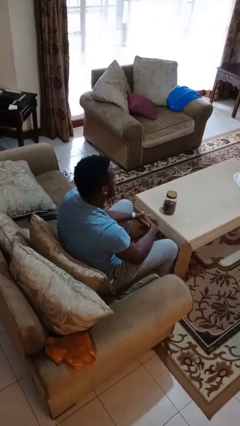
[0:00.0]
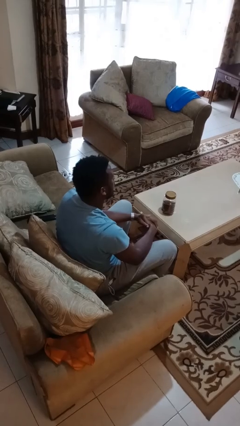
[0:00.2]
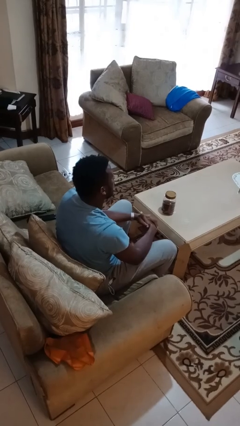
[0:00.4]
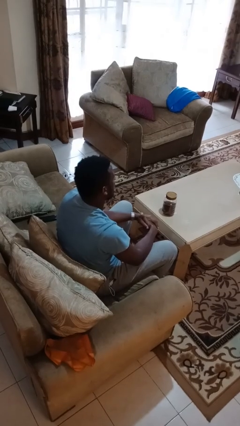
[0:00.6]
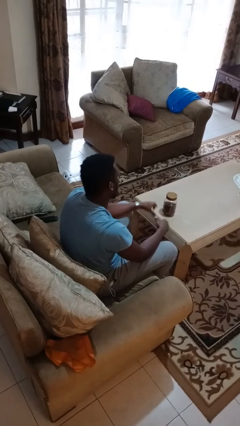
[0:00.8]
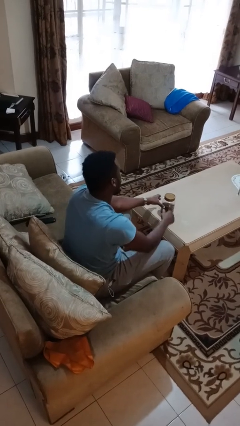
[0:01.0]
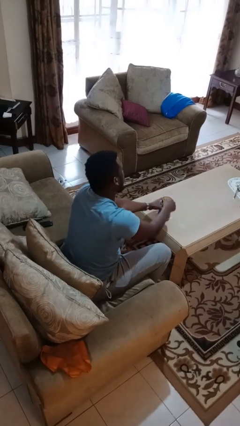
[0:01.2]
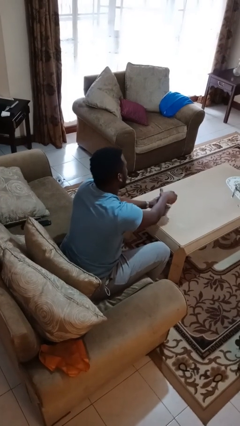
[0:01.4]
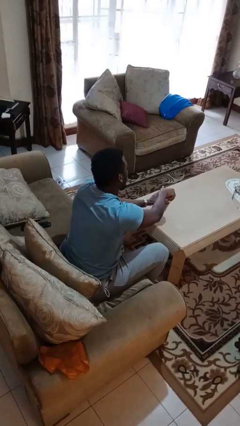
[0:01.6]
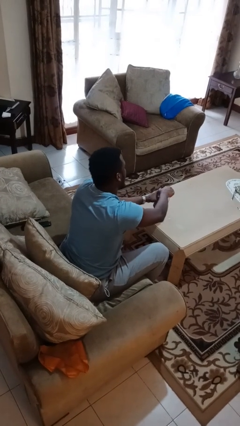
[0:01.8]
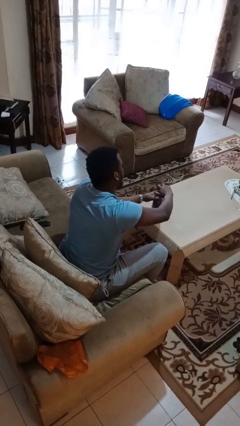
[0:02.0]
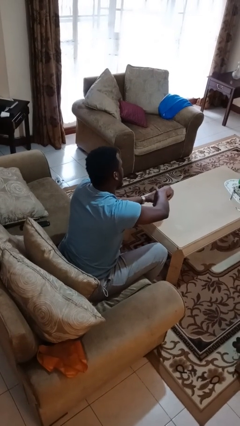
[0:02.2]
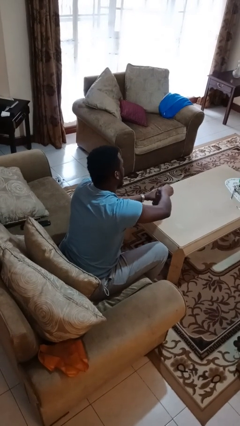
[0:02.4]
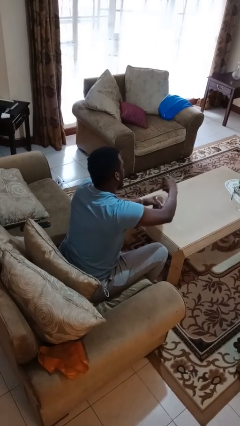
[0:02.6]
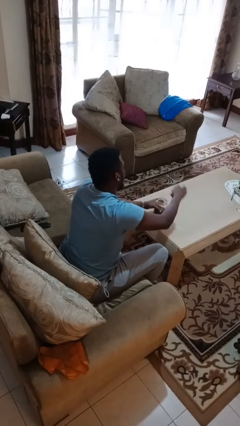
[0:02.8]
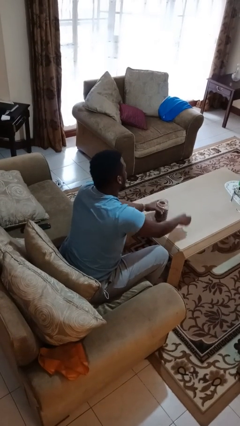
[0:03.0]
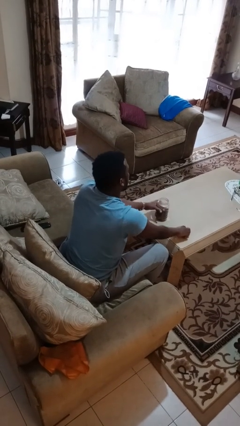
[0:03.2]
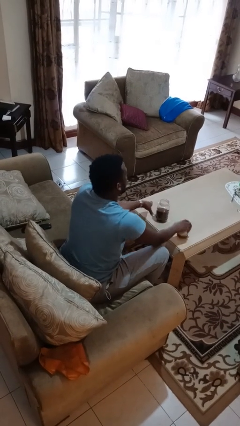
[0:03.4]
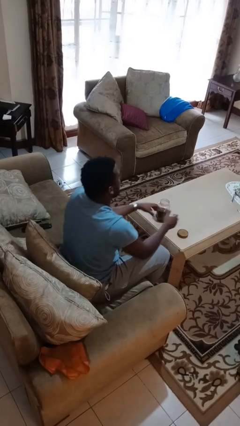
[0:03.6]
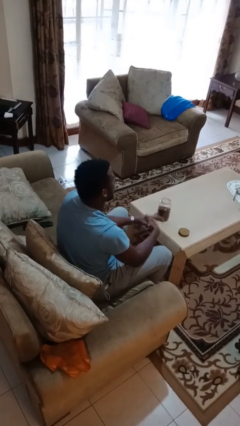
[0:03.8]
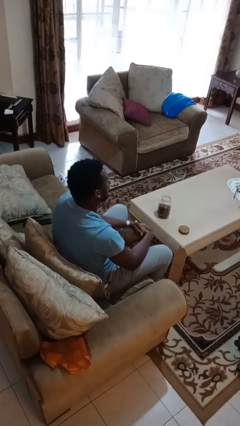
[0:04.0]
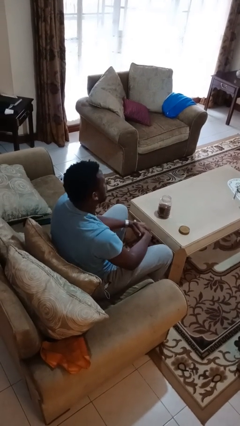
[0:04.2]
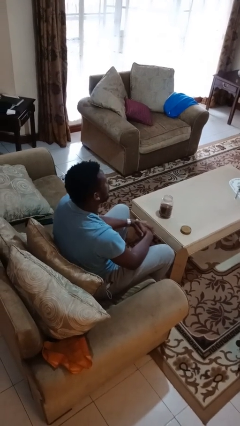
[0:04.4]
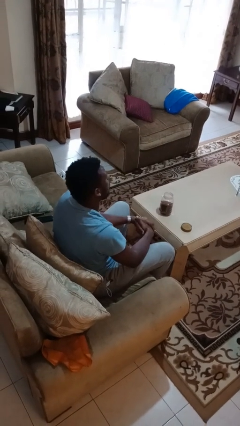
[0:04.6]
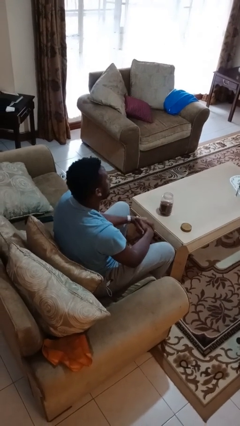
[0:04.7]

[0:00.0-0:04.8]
person opens jar

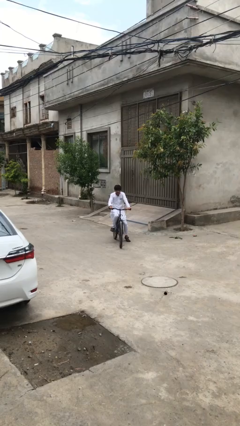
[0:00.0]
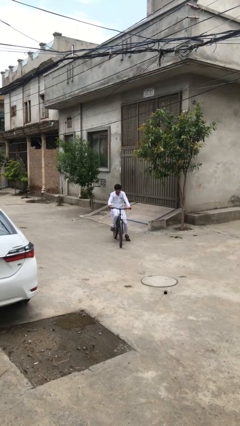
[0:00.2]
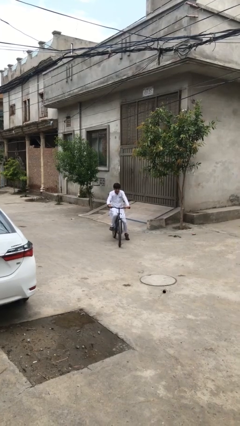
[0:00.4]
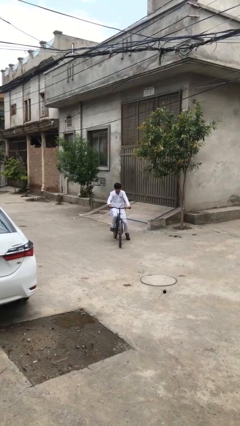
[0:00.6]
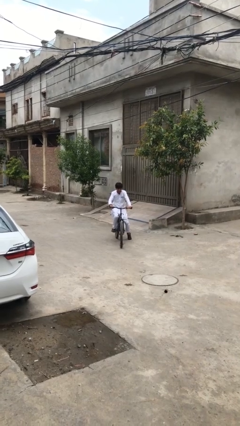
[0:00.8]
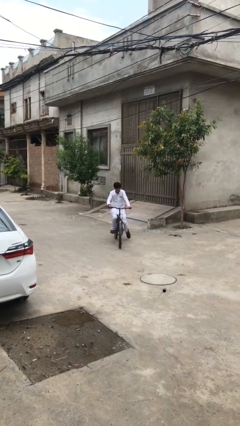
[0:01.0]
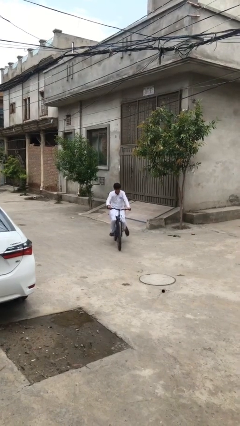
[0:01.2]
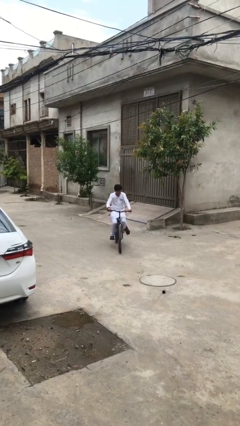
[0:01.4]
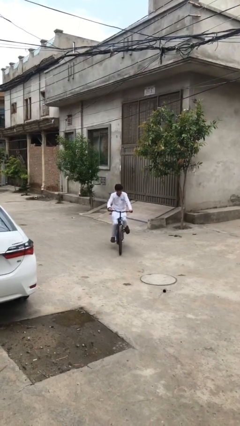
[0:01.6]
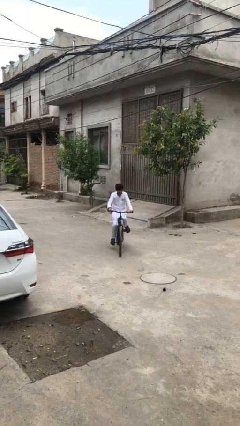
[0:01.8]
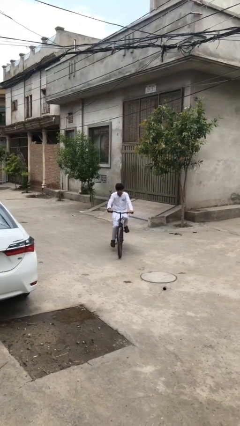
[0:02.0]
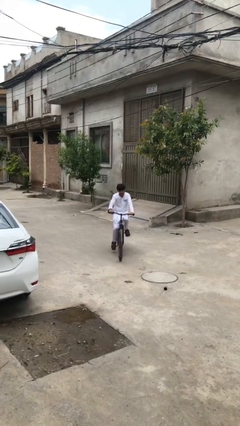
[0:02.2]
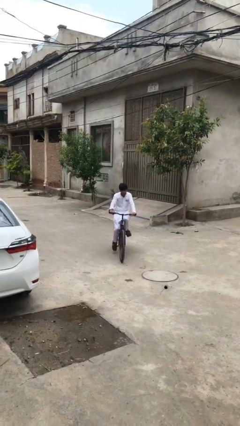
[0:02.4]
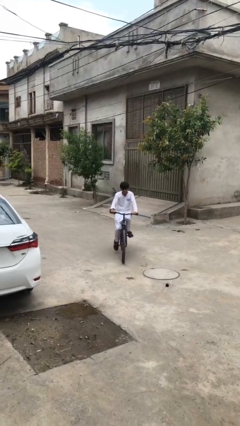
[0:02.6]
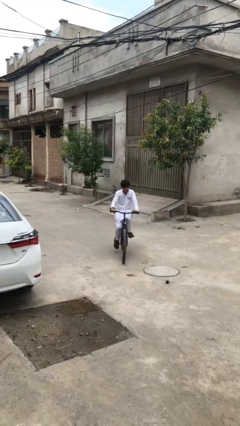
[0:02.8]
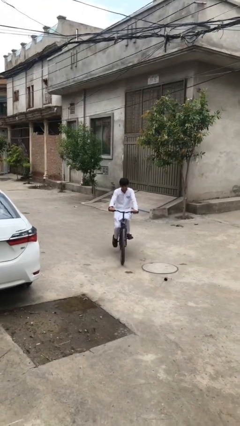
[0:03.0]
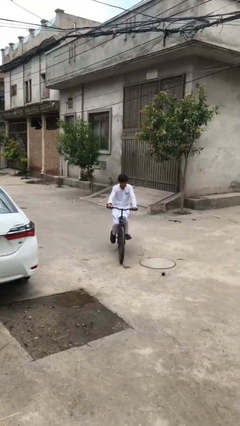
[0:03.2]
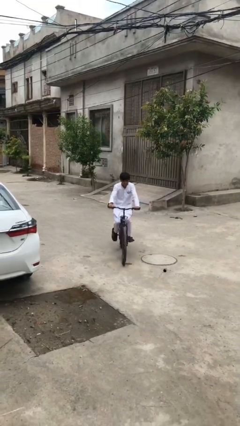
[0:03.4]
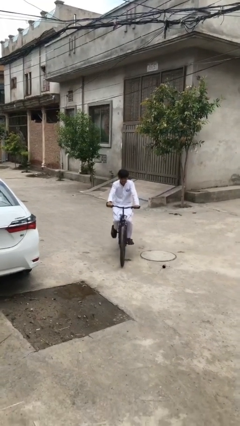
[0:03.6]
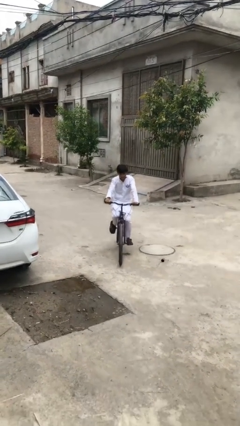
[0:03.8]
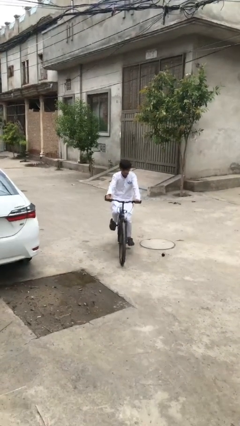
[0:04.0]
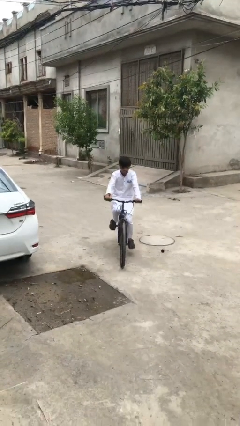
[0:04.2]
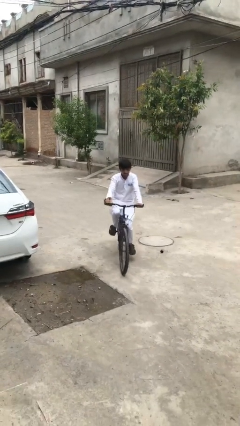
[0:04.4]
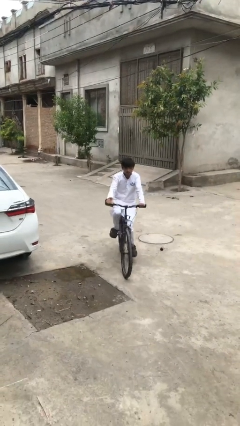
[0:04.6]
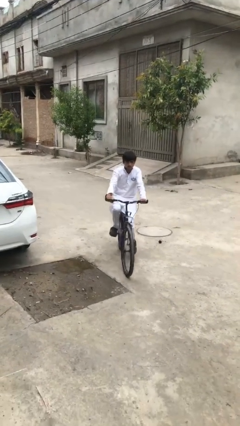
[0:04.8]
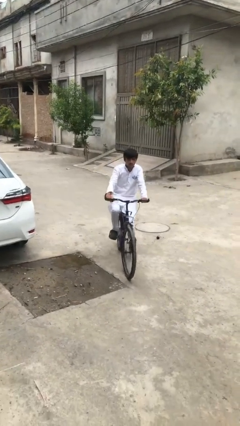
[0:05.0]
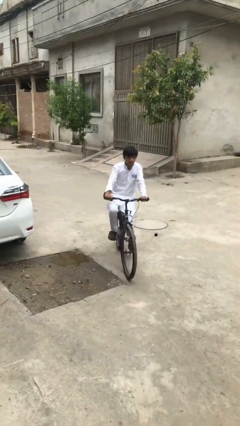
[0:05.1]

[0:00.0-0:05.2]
person rides bicycle

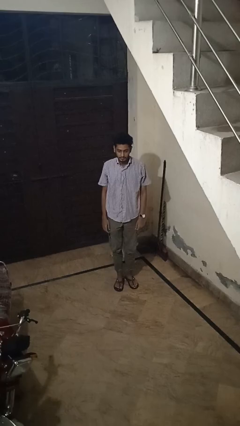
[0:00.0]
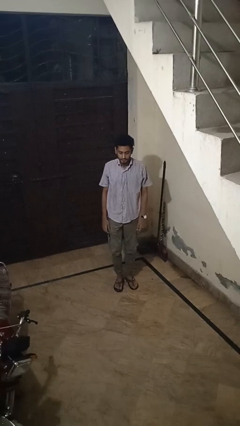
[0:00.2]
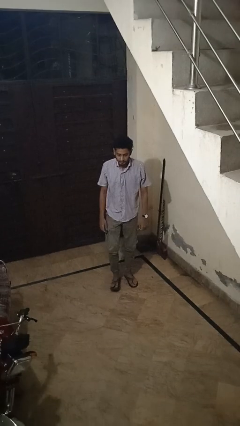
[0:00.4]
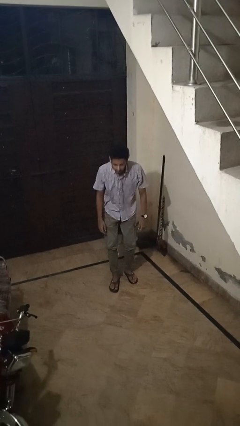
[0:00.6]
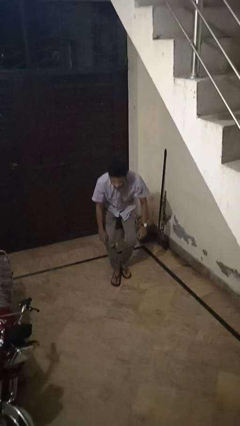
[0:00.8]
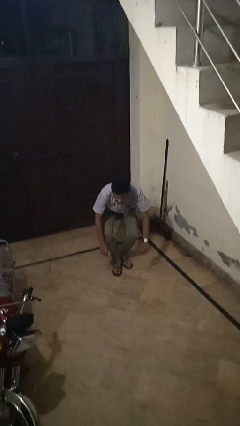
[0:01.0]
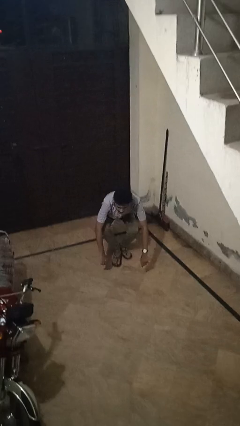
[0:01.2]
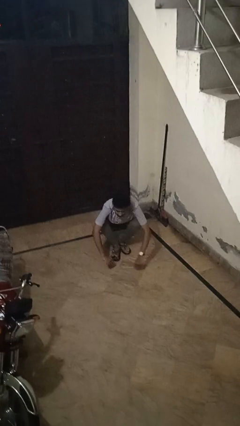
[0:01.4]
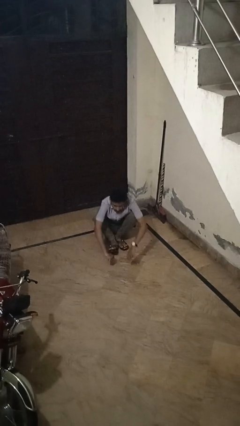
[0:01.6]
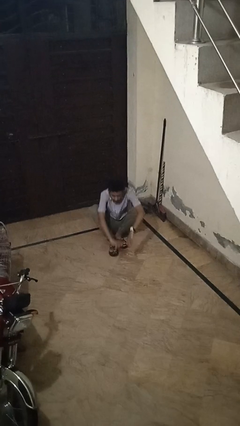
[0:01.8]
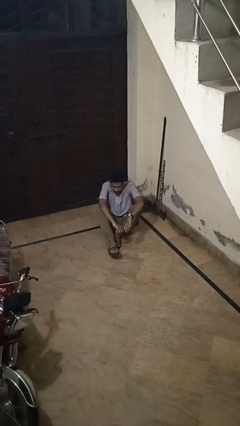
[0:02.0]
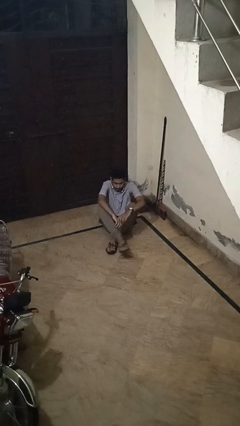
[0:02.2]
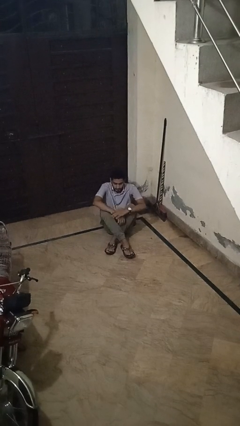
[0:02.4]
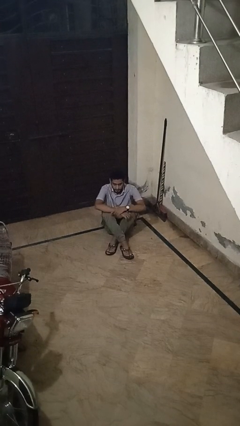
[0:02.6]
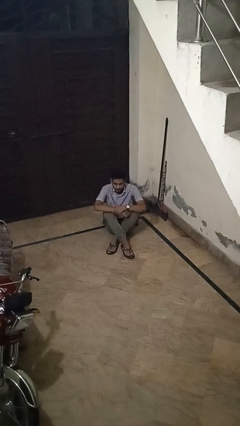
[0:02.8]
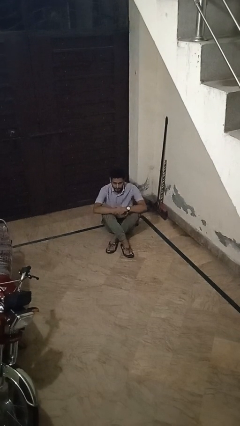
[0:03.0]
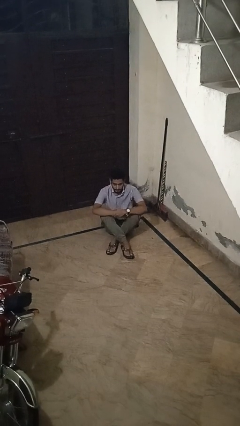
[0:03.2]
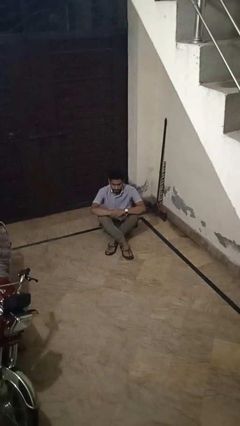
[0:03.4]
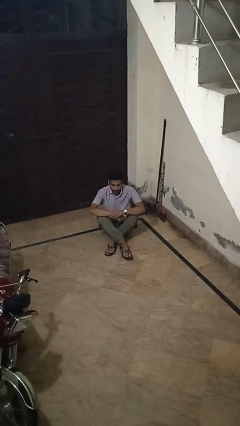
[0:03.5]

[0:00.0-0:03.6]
person sits crisscross

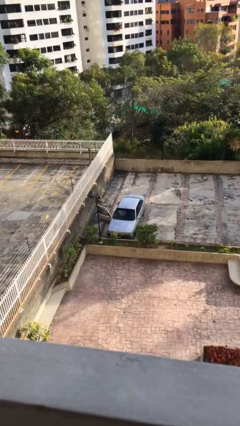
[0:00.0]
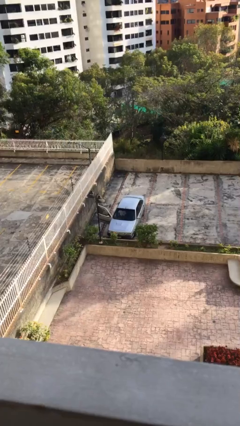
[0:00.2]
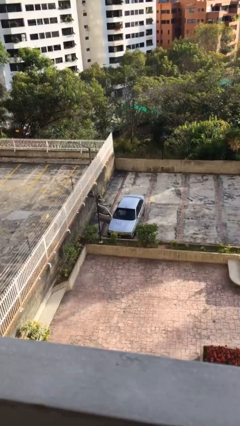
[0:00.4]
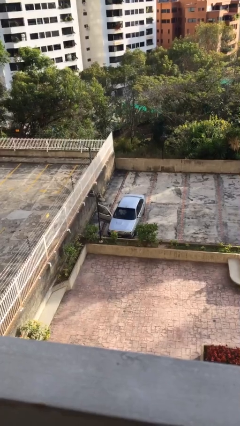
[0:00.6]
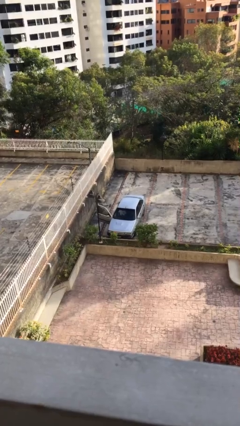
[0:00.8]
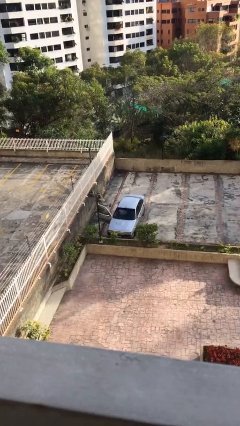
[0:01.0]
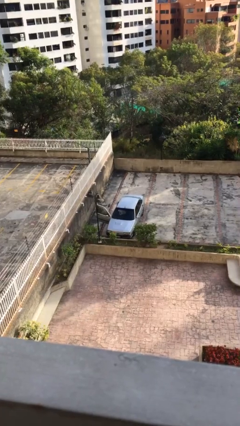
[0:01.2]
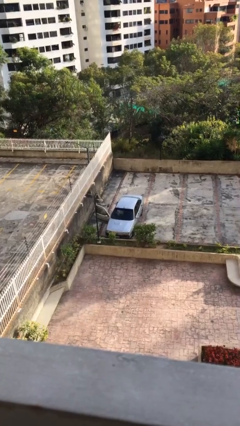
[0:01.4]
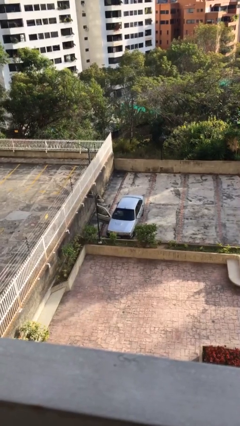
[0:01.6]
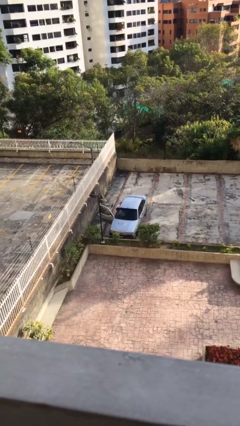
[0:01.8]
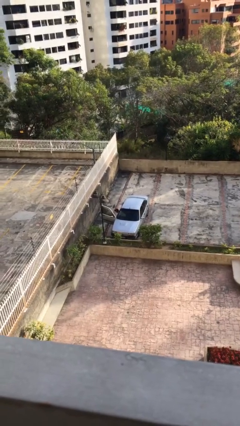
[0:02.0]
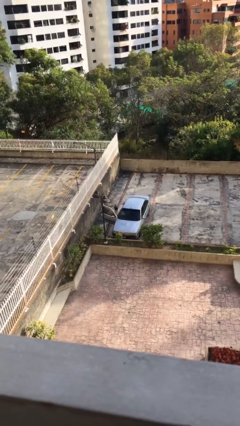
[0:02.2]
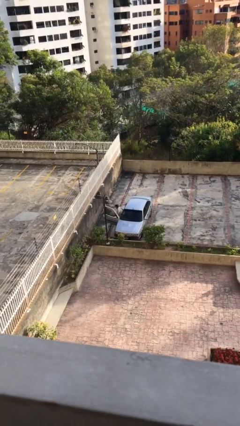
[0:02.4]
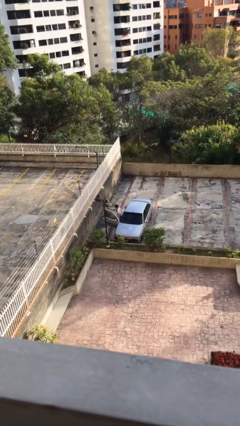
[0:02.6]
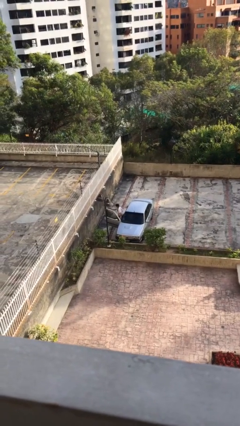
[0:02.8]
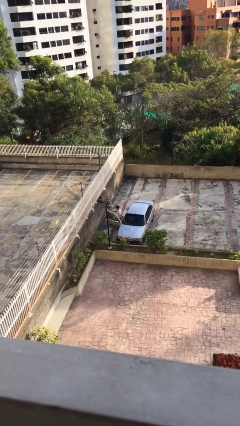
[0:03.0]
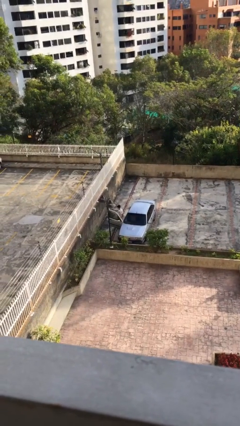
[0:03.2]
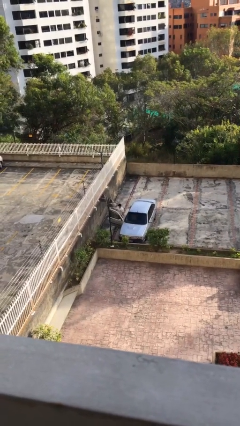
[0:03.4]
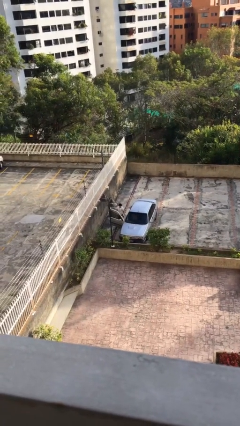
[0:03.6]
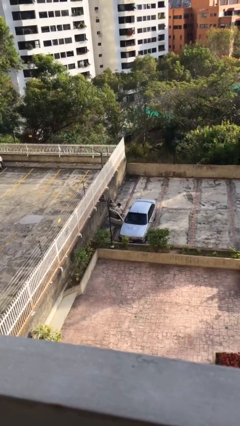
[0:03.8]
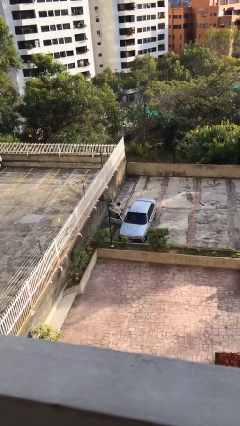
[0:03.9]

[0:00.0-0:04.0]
person exits car
